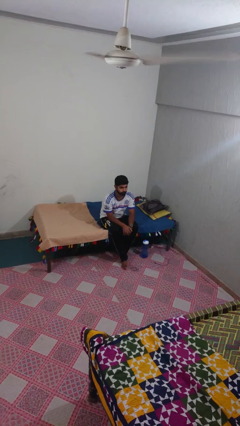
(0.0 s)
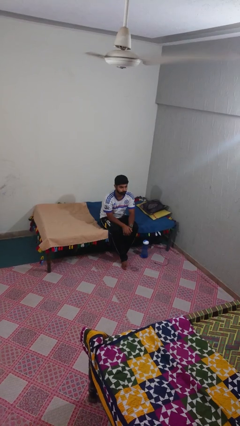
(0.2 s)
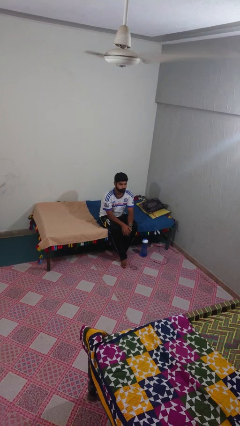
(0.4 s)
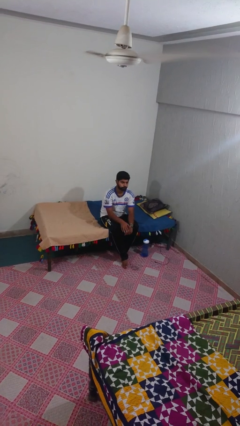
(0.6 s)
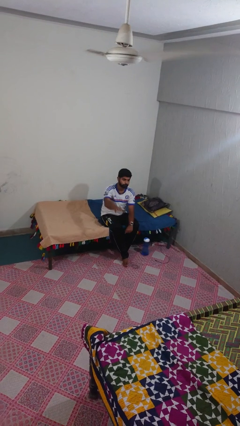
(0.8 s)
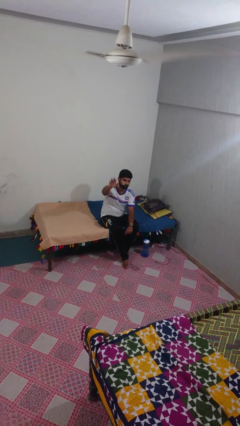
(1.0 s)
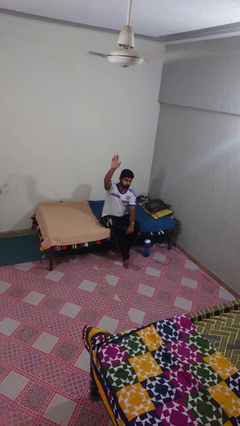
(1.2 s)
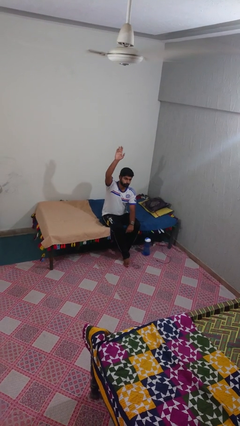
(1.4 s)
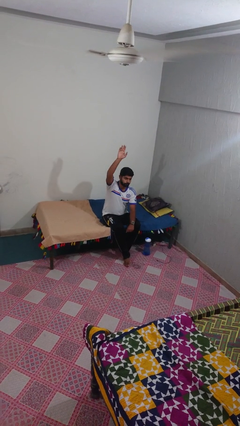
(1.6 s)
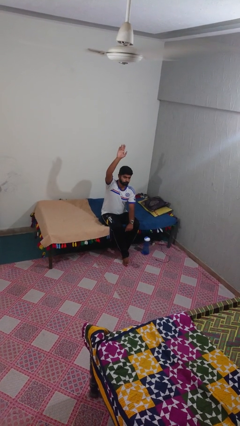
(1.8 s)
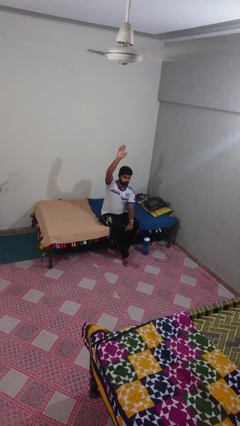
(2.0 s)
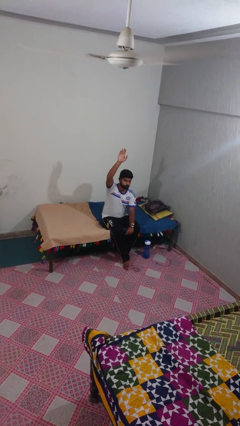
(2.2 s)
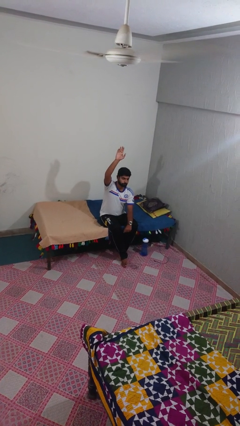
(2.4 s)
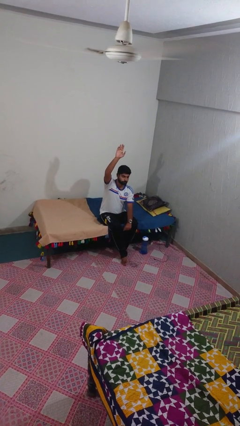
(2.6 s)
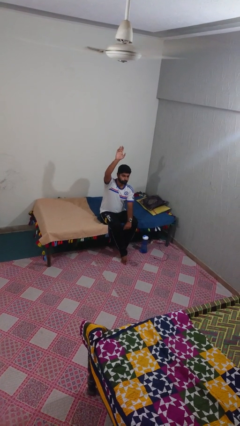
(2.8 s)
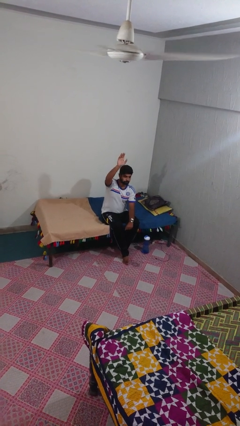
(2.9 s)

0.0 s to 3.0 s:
person gestures raise hand

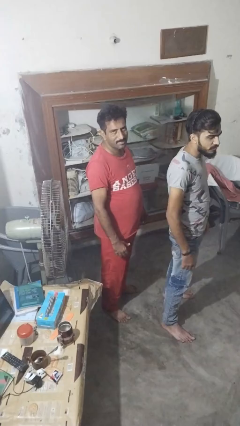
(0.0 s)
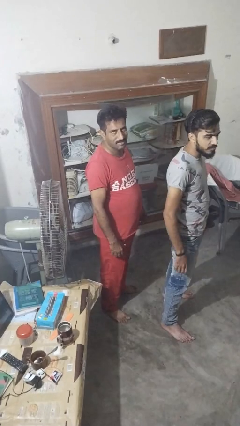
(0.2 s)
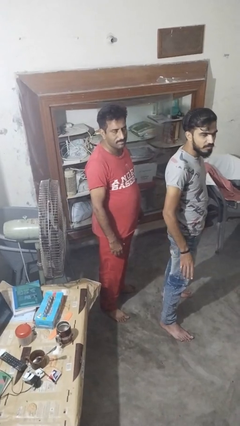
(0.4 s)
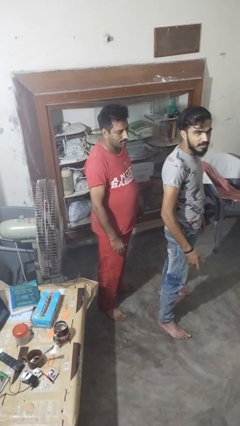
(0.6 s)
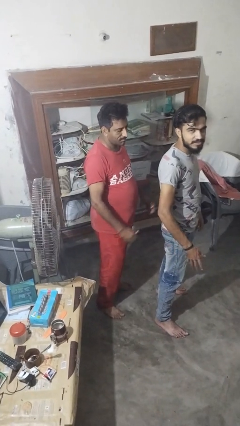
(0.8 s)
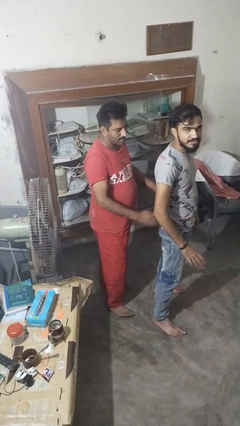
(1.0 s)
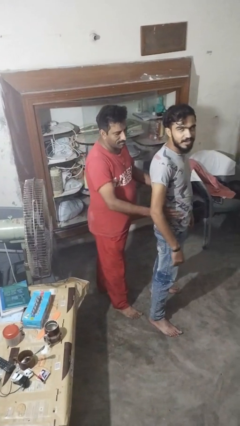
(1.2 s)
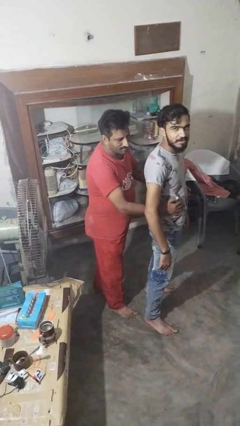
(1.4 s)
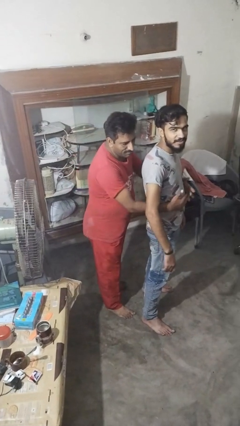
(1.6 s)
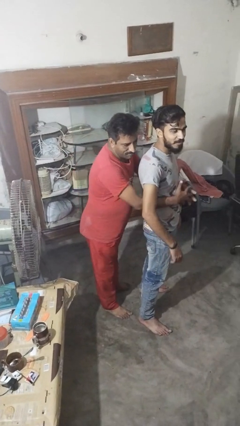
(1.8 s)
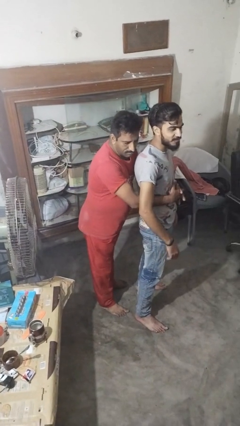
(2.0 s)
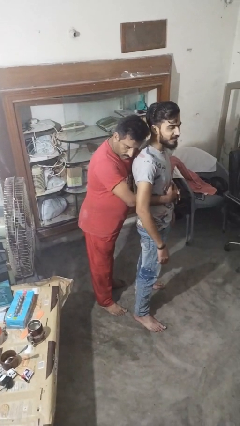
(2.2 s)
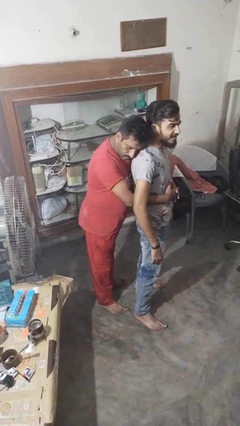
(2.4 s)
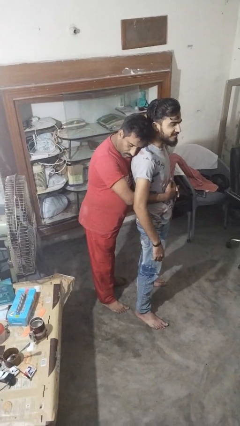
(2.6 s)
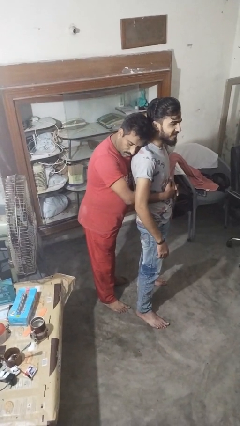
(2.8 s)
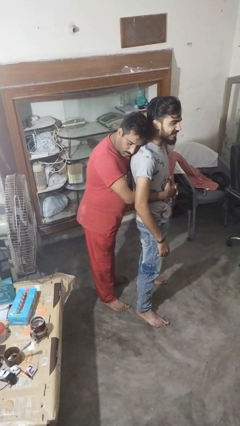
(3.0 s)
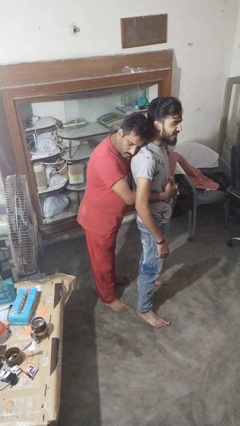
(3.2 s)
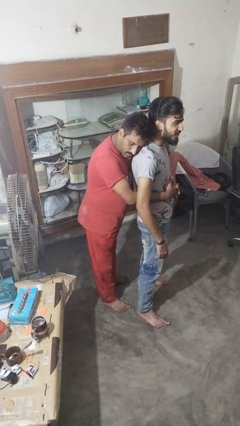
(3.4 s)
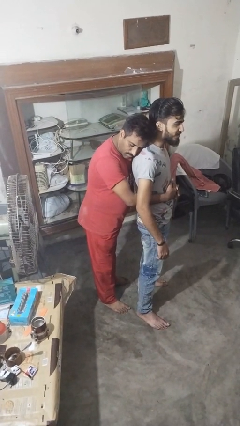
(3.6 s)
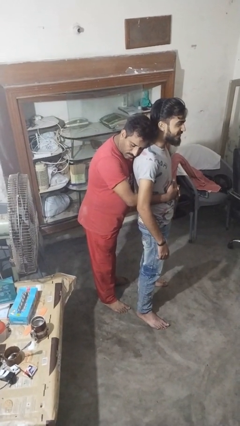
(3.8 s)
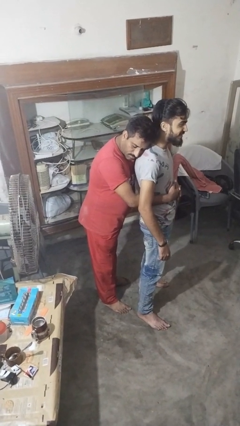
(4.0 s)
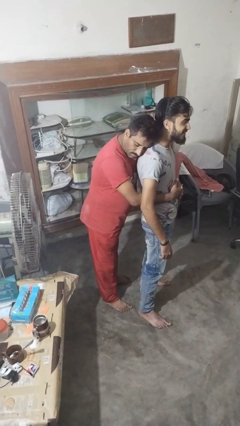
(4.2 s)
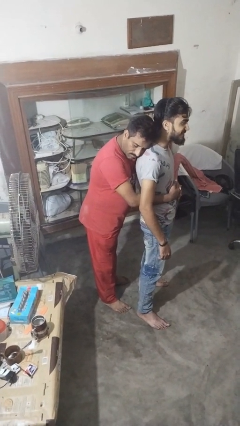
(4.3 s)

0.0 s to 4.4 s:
person hugs person from behind

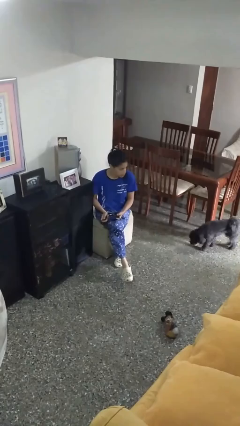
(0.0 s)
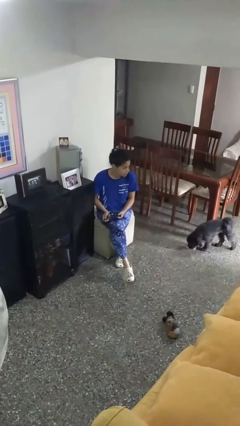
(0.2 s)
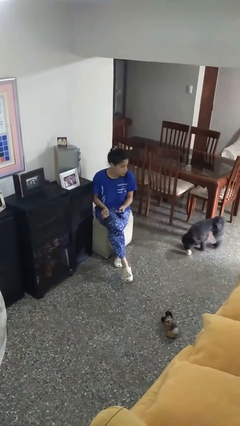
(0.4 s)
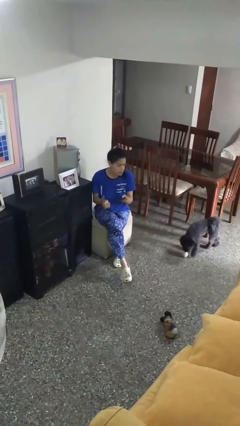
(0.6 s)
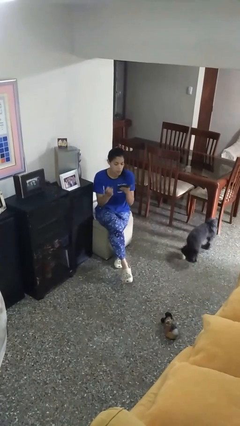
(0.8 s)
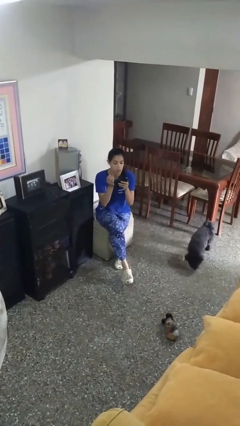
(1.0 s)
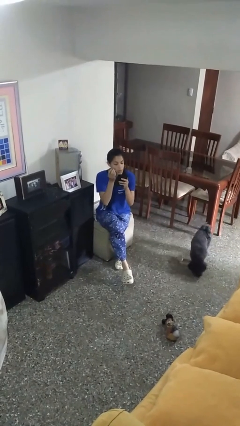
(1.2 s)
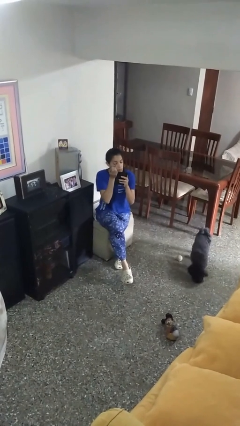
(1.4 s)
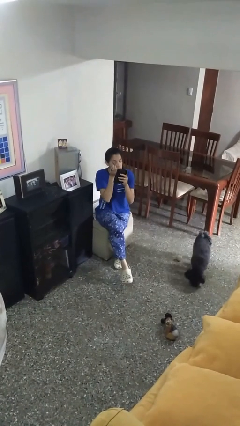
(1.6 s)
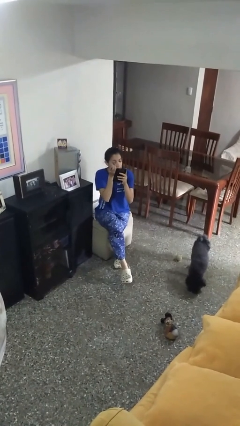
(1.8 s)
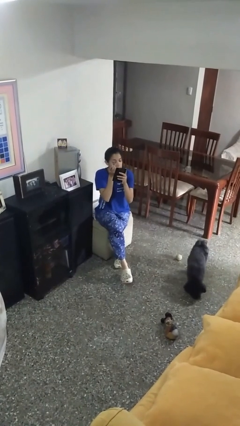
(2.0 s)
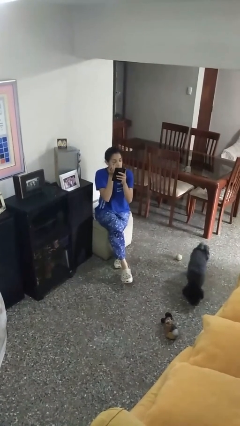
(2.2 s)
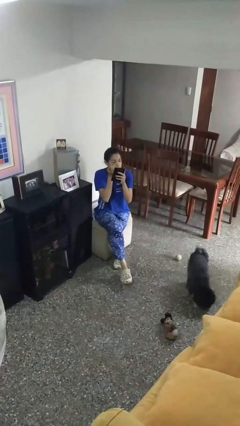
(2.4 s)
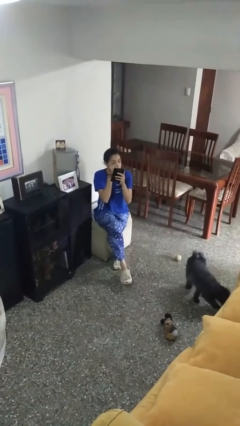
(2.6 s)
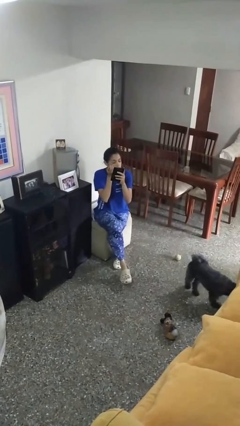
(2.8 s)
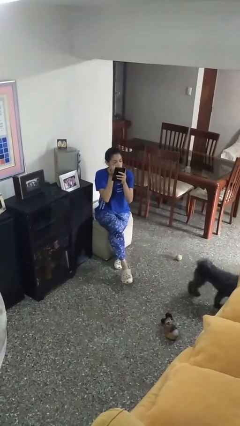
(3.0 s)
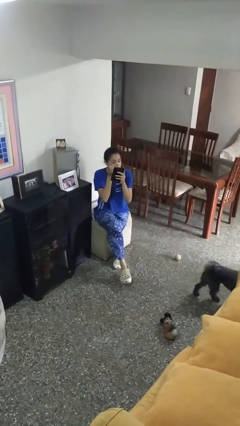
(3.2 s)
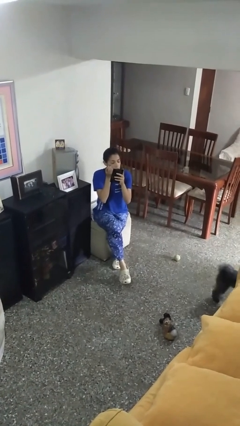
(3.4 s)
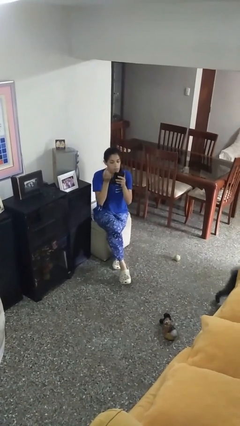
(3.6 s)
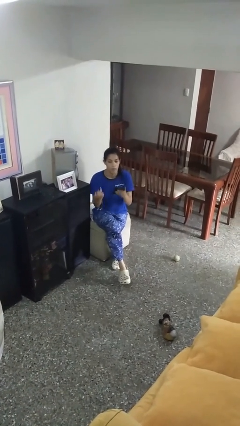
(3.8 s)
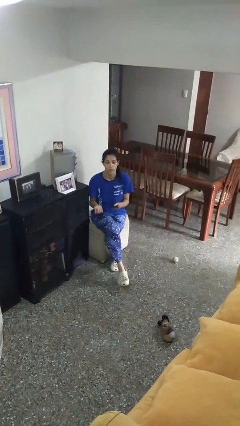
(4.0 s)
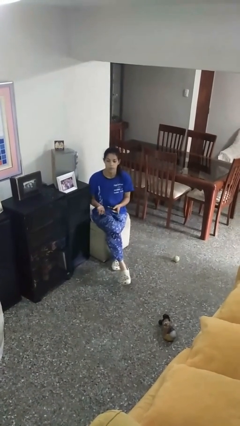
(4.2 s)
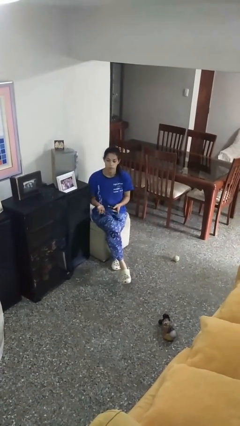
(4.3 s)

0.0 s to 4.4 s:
person applies eye makeup

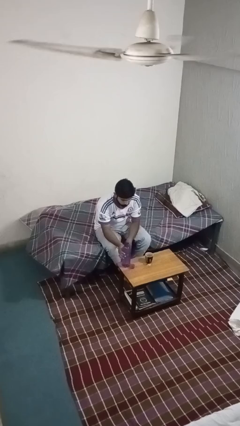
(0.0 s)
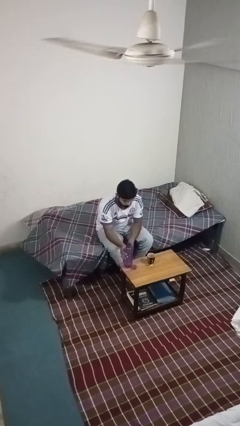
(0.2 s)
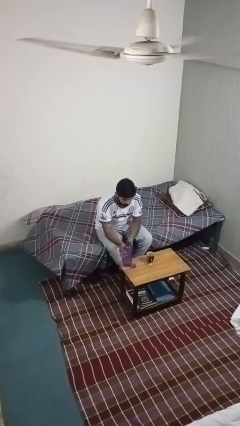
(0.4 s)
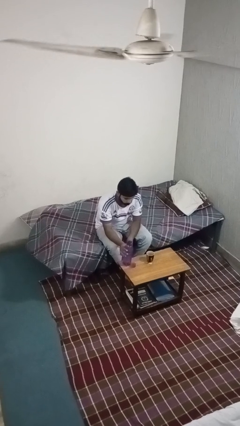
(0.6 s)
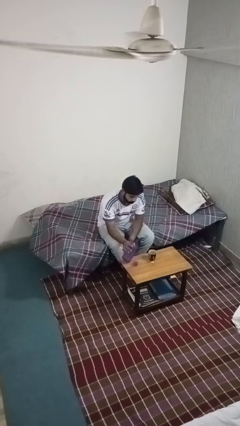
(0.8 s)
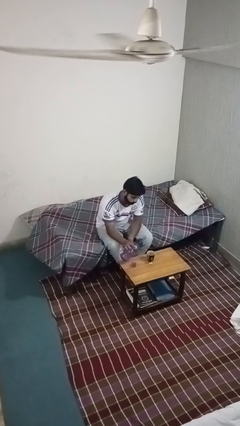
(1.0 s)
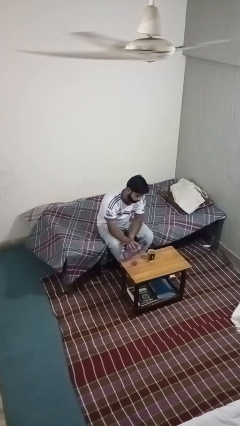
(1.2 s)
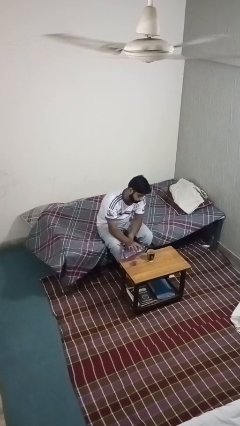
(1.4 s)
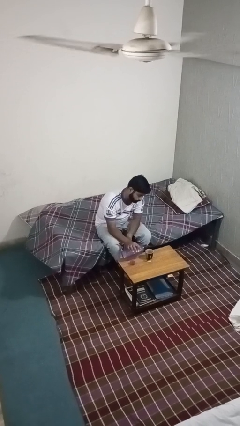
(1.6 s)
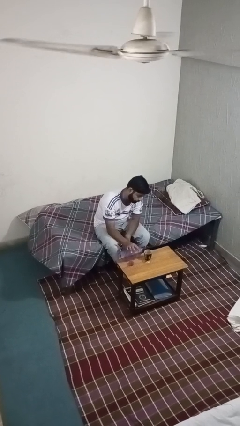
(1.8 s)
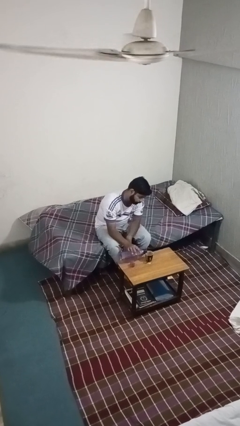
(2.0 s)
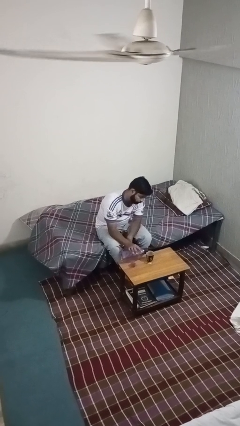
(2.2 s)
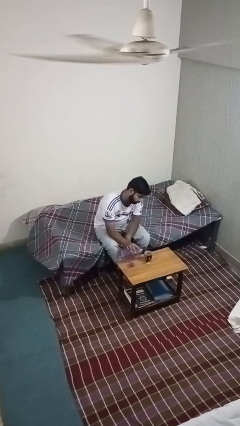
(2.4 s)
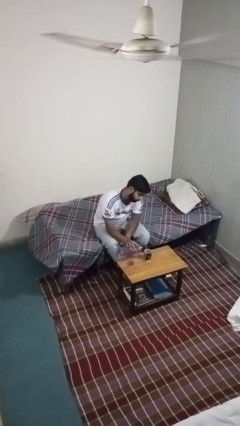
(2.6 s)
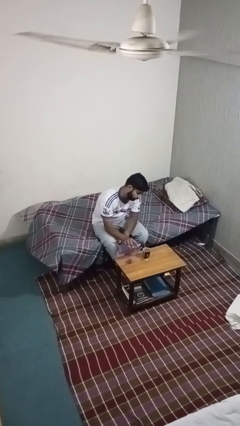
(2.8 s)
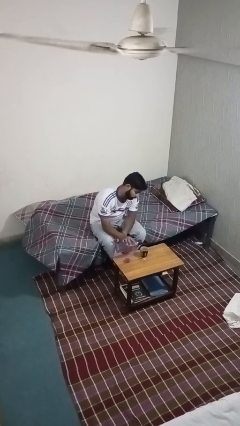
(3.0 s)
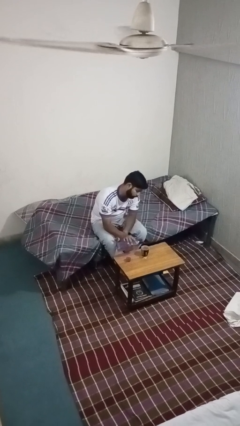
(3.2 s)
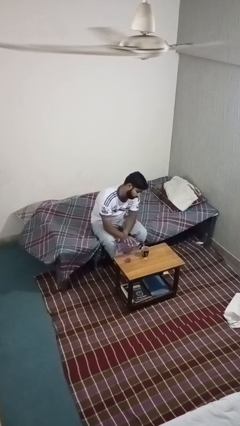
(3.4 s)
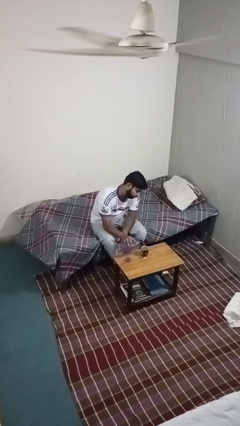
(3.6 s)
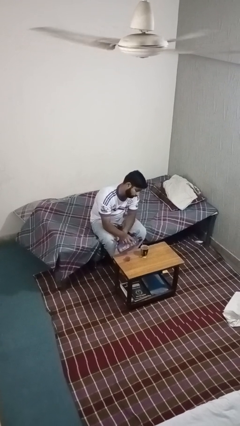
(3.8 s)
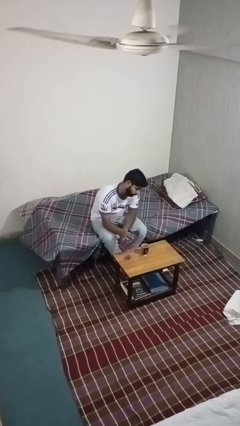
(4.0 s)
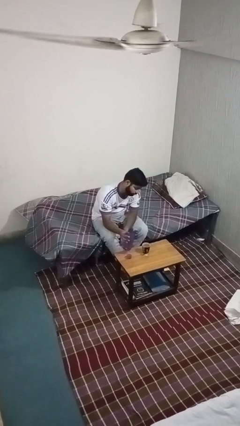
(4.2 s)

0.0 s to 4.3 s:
person pours liquid into cup

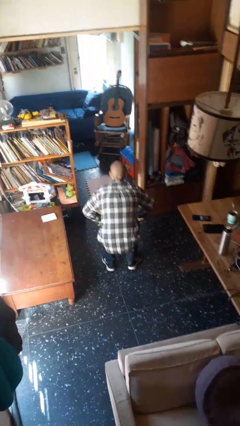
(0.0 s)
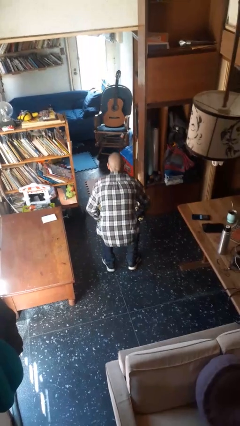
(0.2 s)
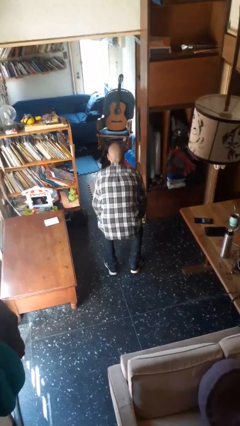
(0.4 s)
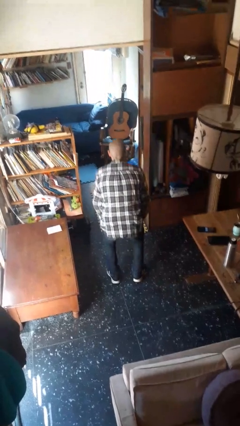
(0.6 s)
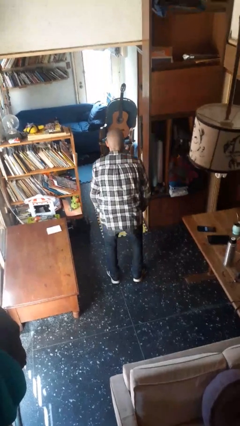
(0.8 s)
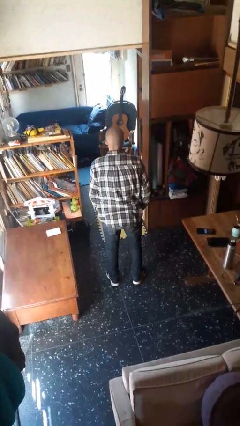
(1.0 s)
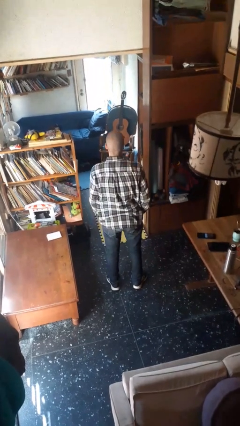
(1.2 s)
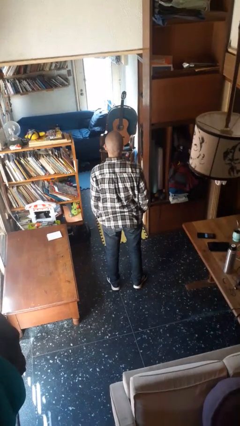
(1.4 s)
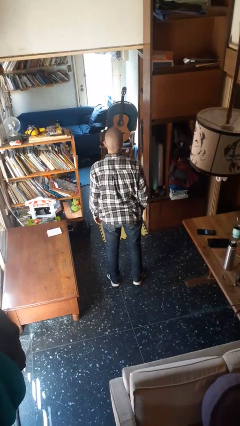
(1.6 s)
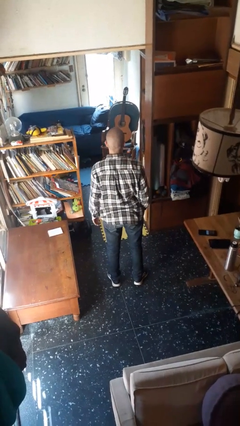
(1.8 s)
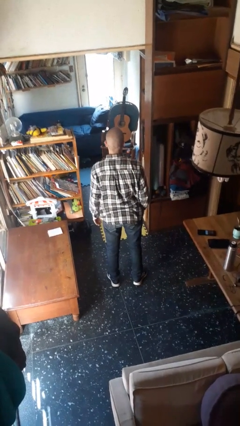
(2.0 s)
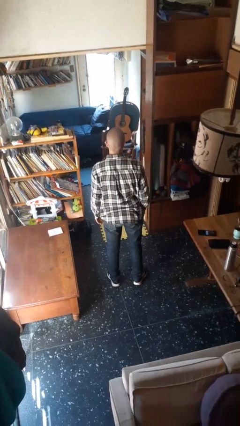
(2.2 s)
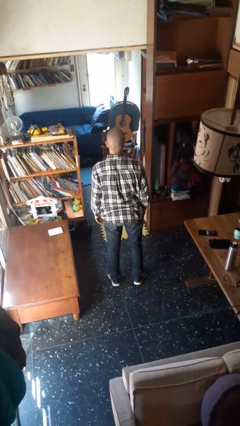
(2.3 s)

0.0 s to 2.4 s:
person stands up
